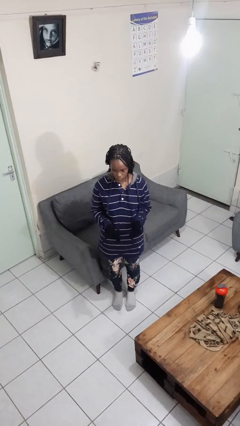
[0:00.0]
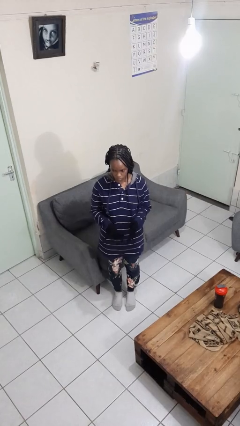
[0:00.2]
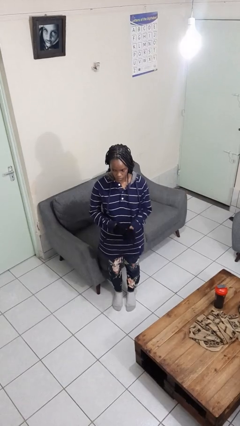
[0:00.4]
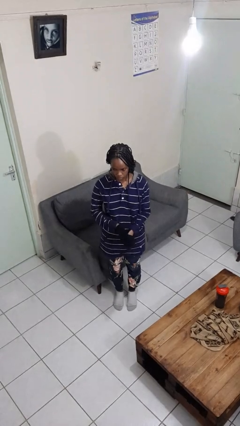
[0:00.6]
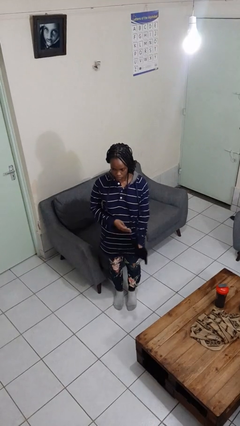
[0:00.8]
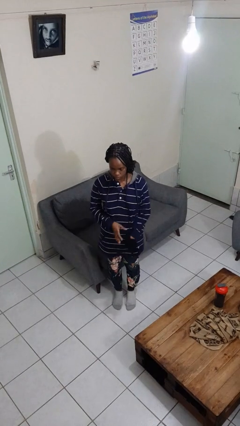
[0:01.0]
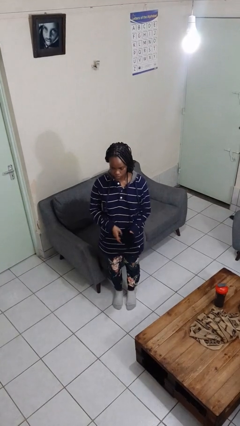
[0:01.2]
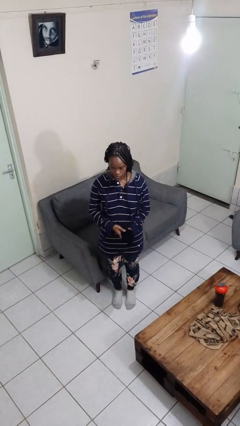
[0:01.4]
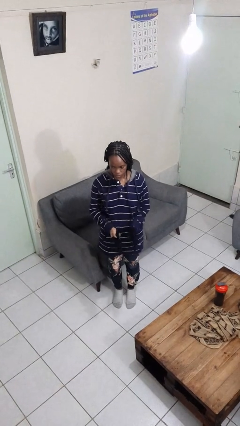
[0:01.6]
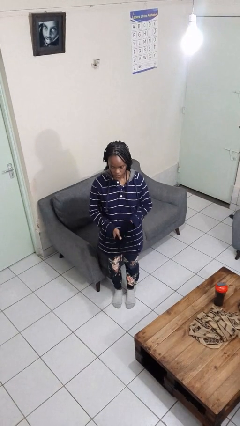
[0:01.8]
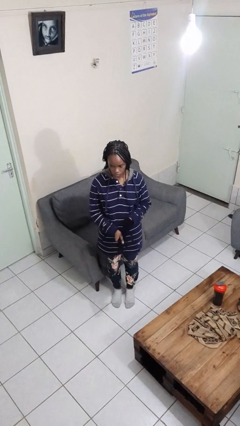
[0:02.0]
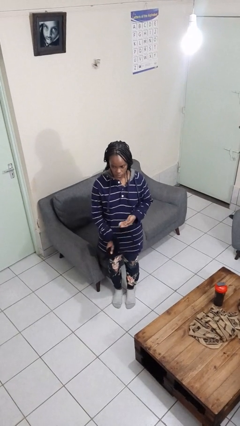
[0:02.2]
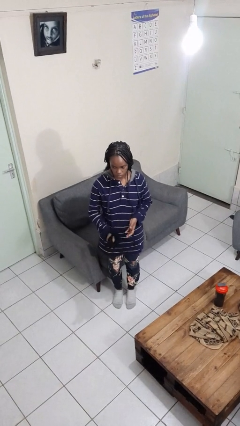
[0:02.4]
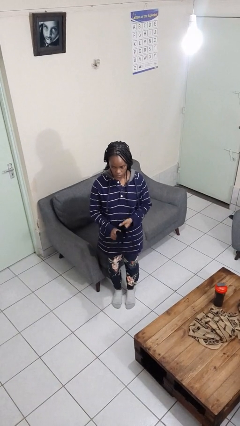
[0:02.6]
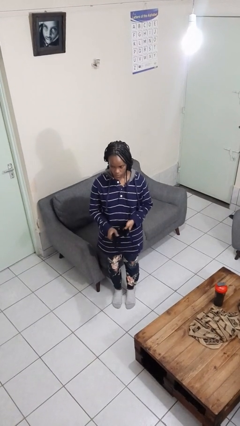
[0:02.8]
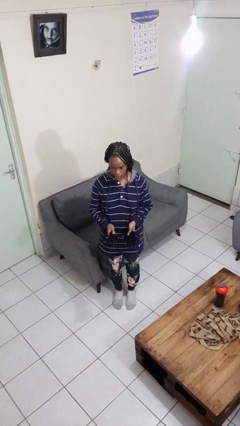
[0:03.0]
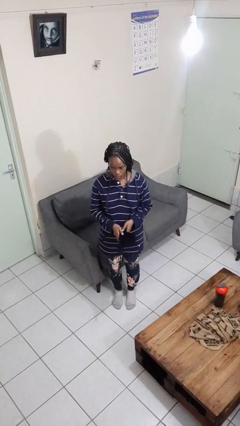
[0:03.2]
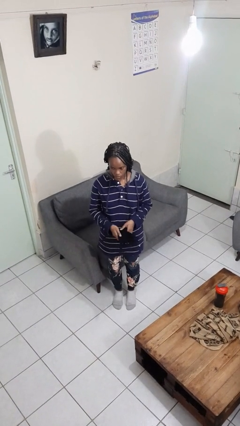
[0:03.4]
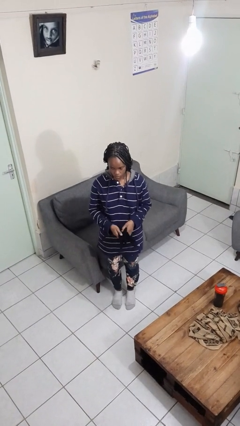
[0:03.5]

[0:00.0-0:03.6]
person takes off gloves

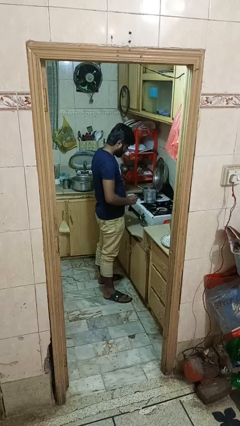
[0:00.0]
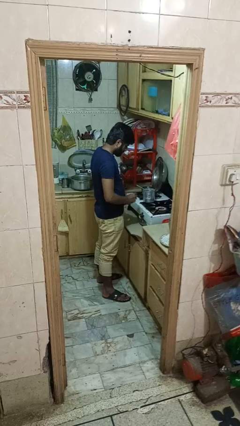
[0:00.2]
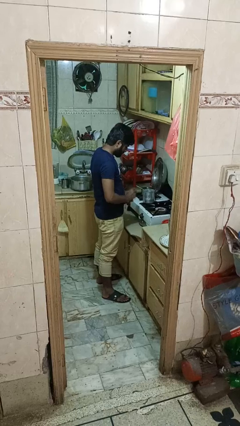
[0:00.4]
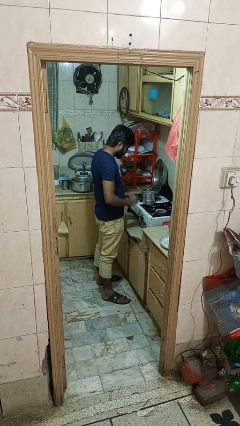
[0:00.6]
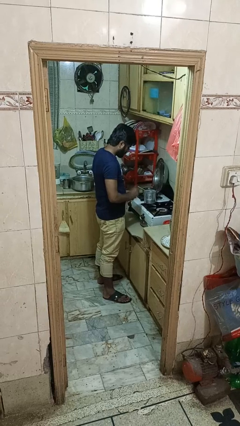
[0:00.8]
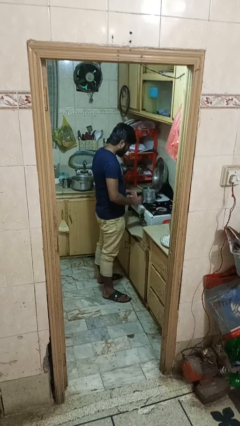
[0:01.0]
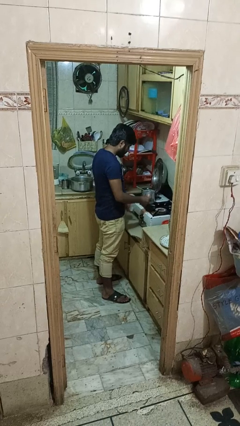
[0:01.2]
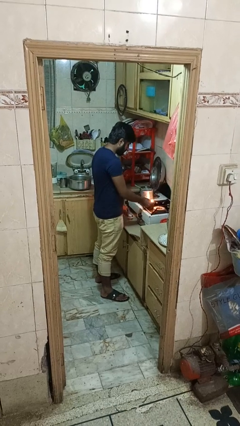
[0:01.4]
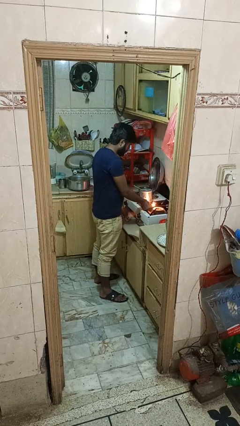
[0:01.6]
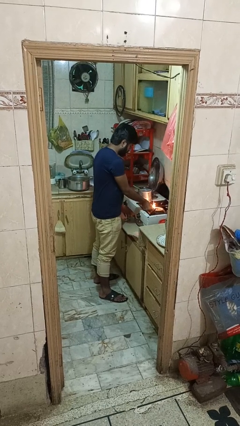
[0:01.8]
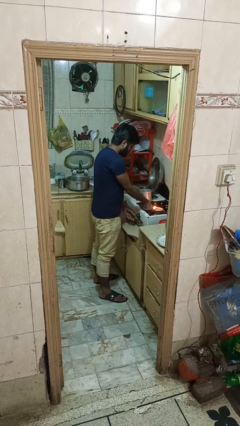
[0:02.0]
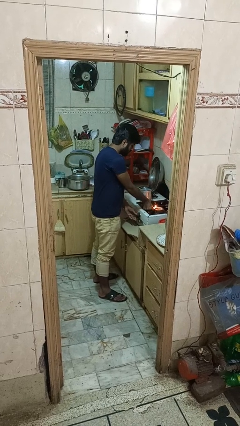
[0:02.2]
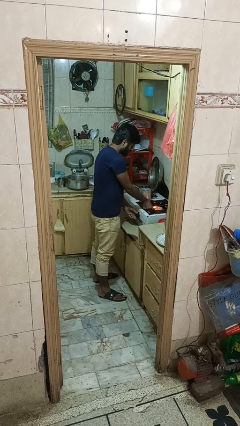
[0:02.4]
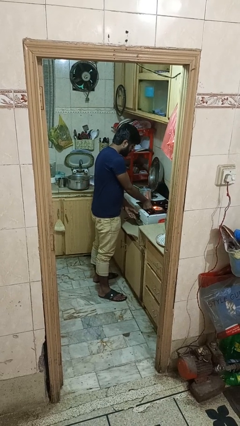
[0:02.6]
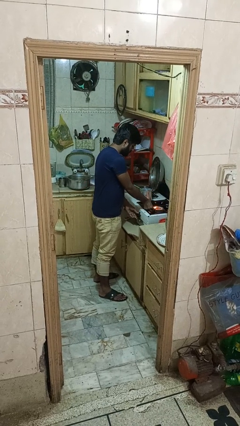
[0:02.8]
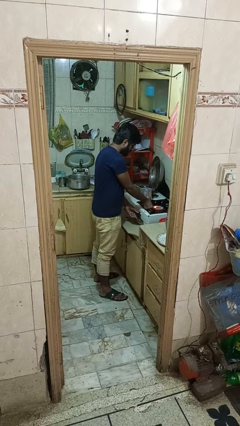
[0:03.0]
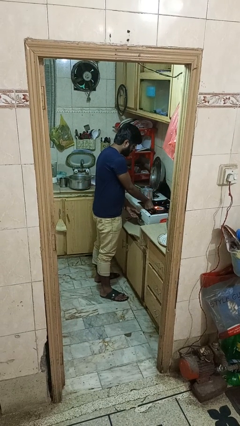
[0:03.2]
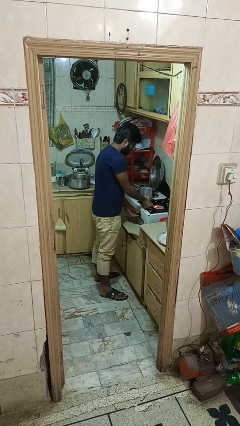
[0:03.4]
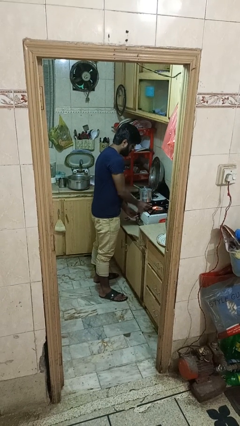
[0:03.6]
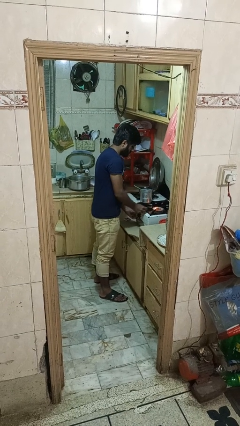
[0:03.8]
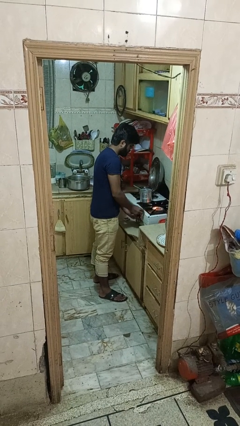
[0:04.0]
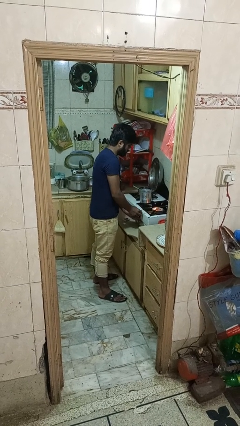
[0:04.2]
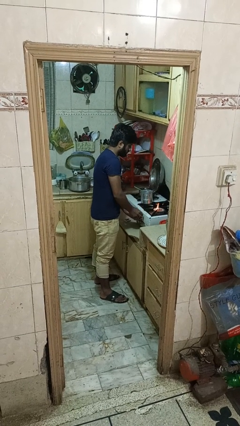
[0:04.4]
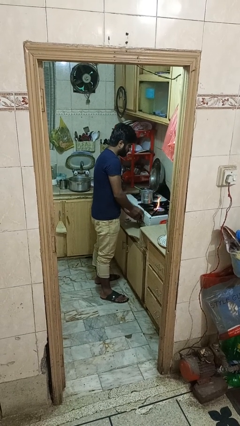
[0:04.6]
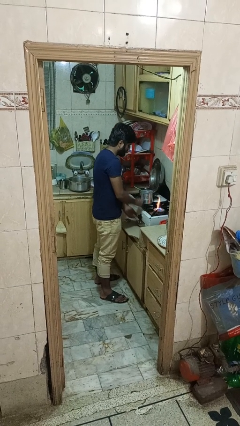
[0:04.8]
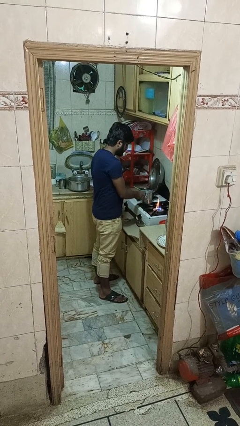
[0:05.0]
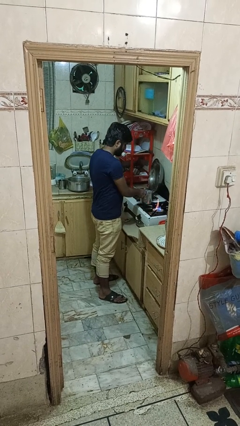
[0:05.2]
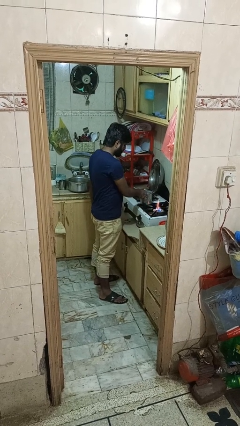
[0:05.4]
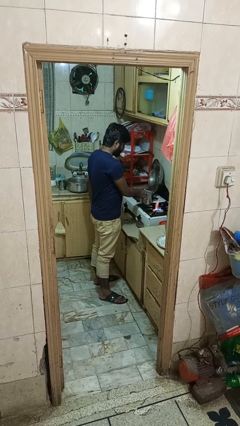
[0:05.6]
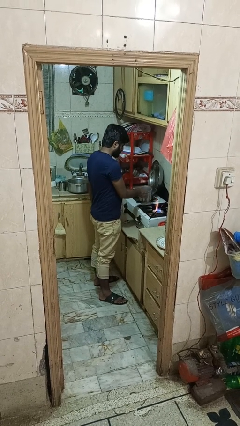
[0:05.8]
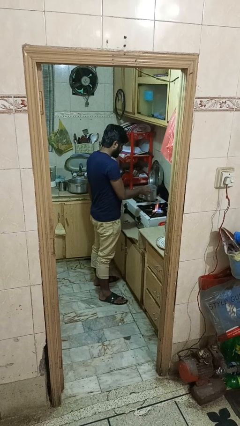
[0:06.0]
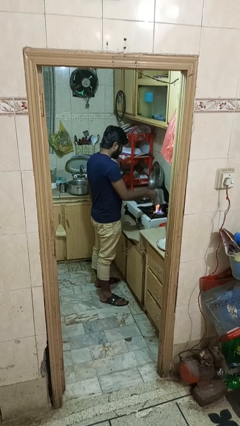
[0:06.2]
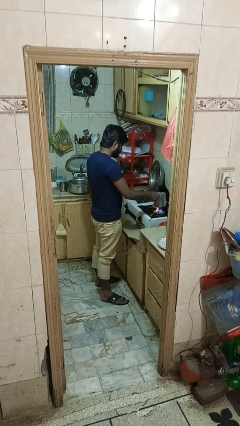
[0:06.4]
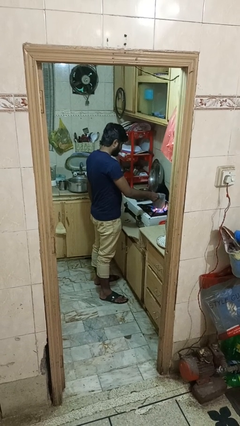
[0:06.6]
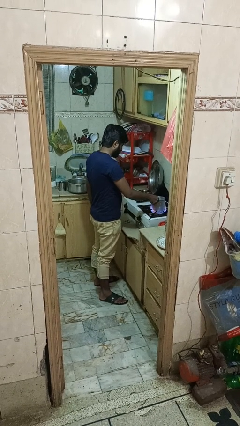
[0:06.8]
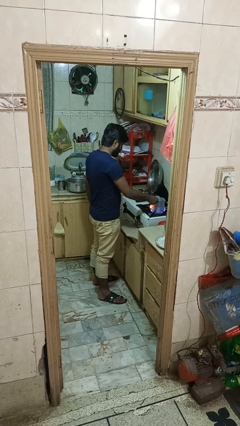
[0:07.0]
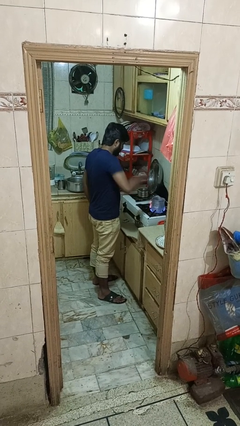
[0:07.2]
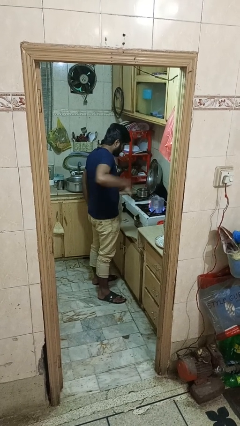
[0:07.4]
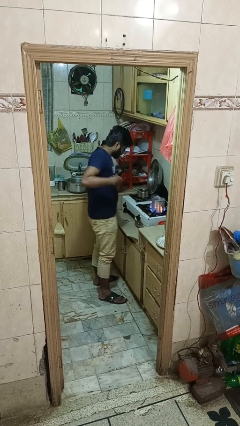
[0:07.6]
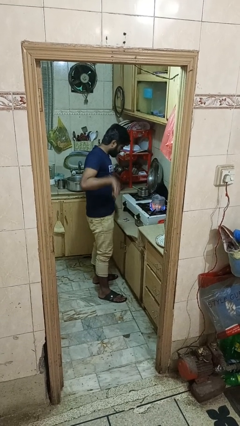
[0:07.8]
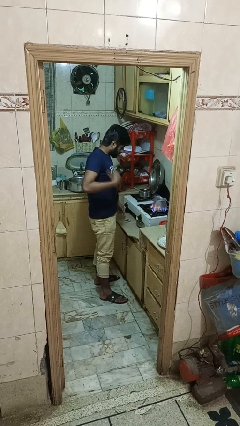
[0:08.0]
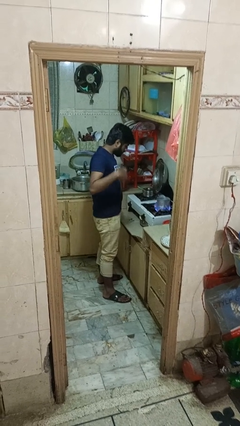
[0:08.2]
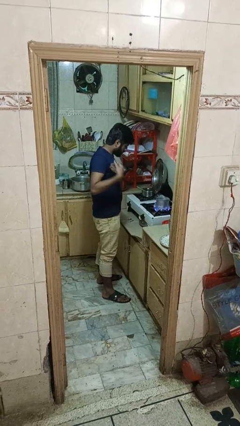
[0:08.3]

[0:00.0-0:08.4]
person burns hand

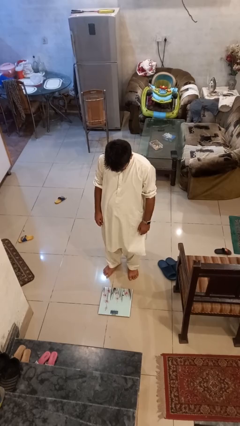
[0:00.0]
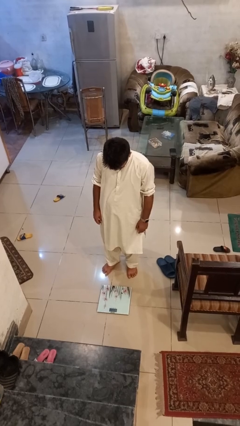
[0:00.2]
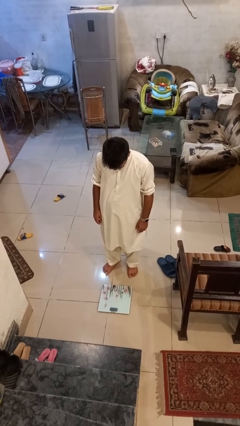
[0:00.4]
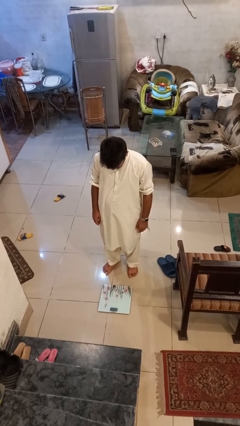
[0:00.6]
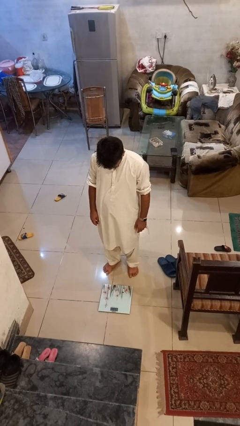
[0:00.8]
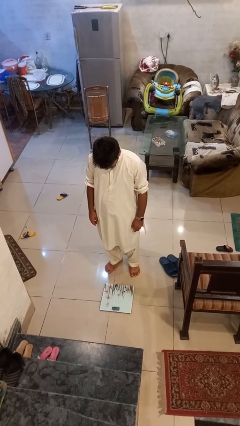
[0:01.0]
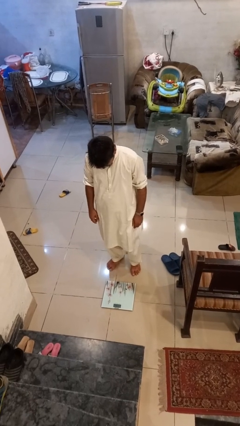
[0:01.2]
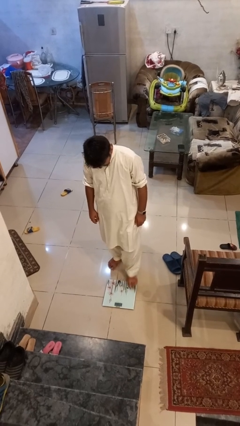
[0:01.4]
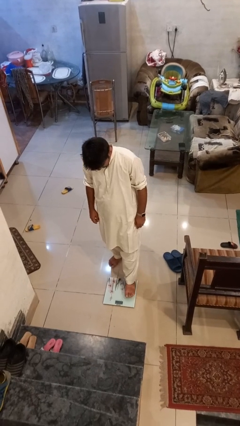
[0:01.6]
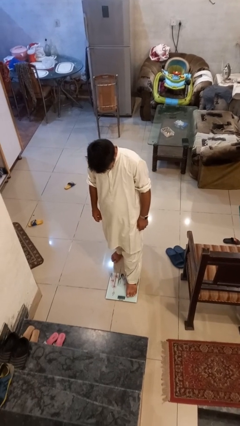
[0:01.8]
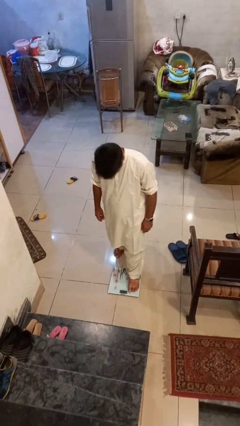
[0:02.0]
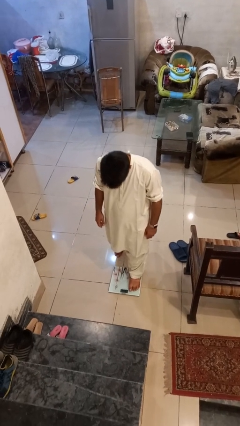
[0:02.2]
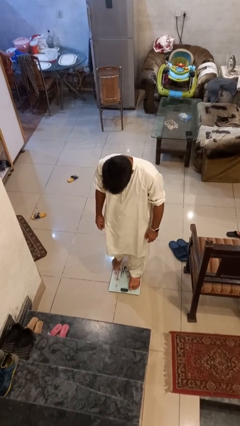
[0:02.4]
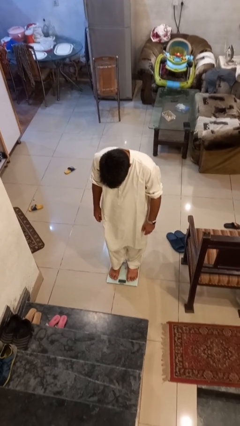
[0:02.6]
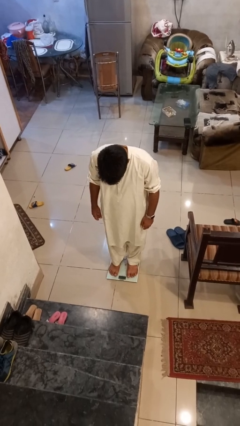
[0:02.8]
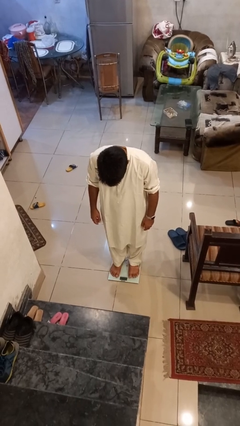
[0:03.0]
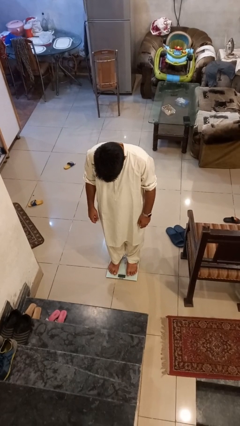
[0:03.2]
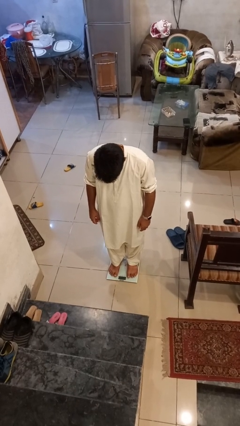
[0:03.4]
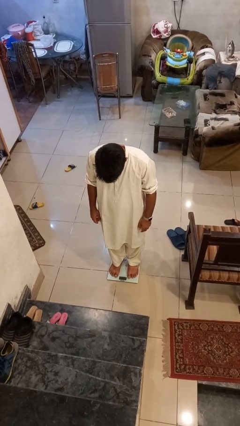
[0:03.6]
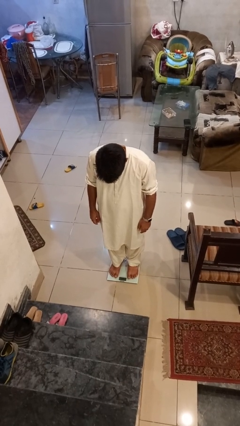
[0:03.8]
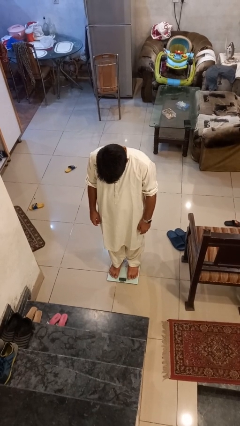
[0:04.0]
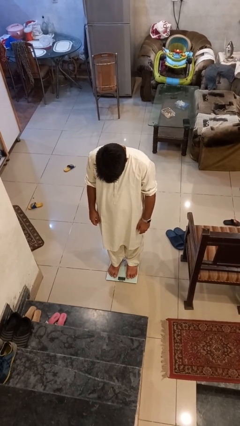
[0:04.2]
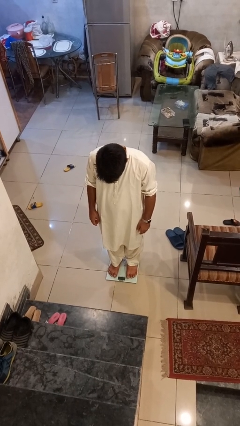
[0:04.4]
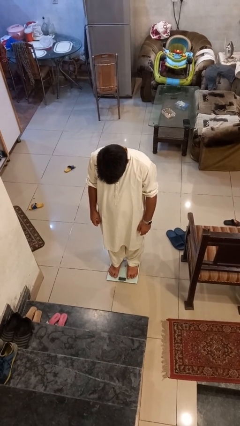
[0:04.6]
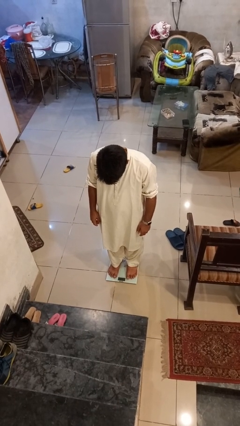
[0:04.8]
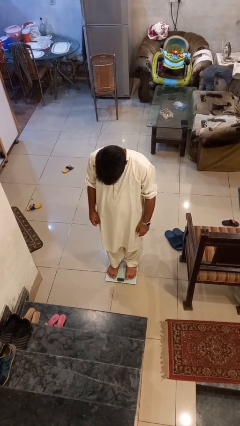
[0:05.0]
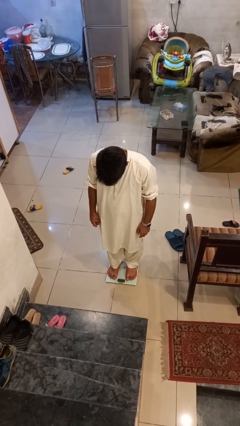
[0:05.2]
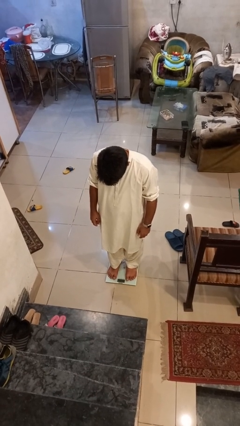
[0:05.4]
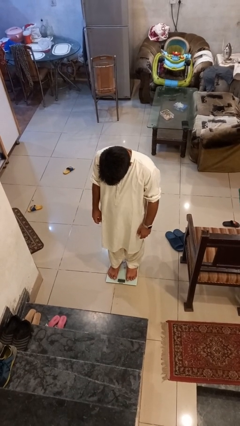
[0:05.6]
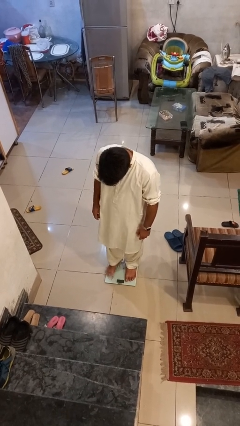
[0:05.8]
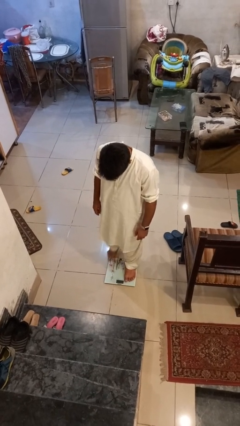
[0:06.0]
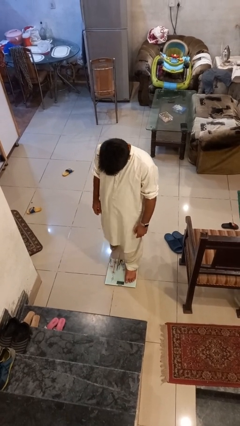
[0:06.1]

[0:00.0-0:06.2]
person uses bodyweight scale
